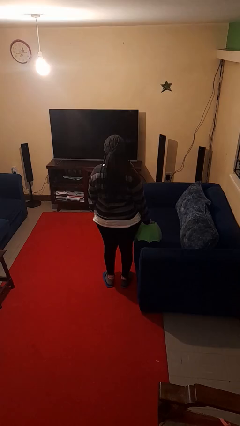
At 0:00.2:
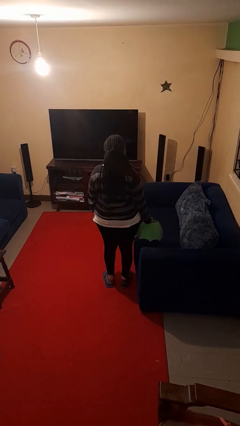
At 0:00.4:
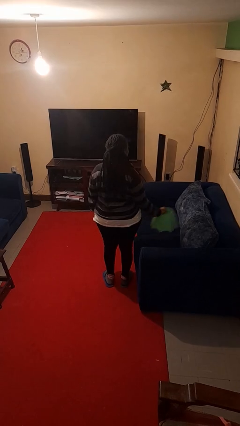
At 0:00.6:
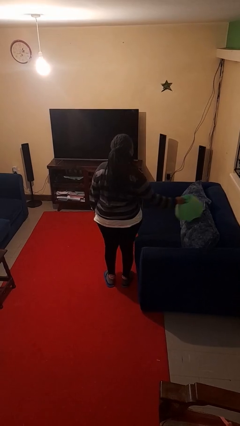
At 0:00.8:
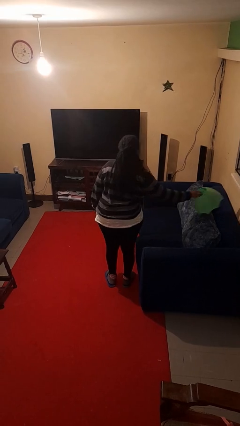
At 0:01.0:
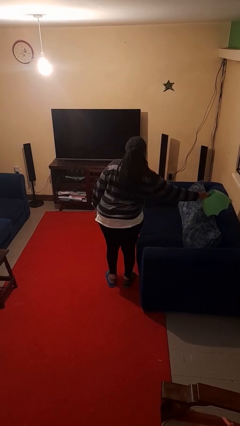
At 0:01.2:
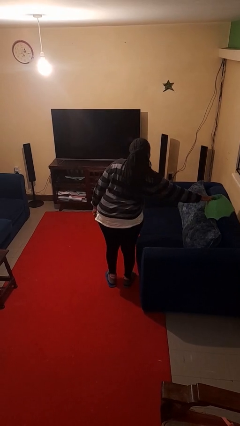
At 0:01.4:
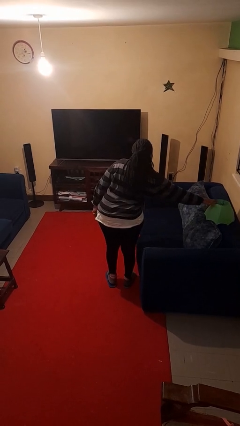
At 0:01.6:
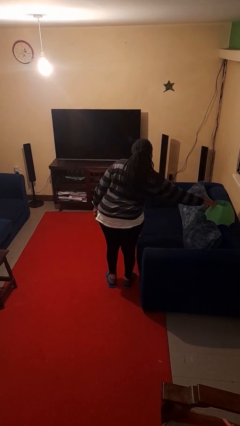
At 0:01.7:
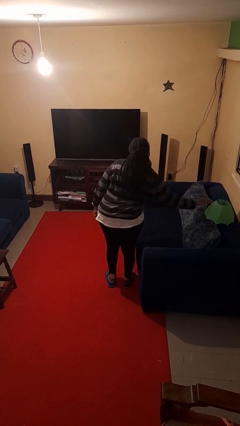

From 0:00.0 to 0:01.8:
person puts down object on couch

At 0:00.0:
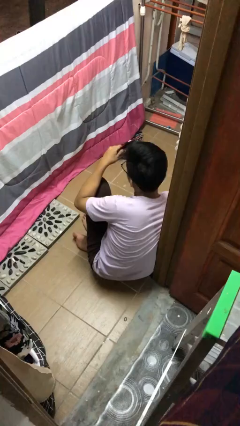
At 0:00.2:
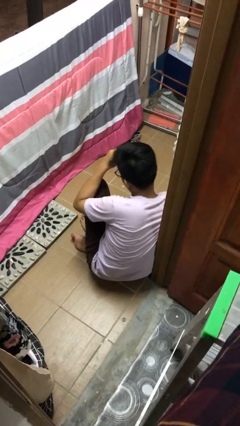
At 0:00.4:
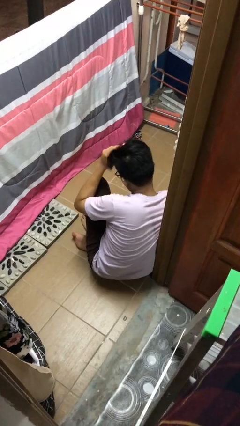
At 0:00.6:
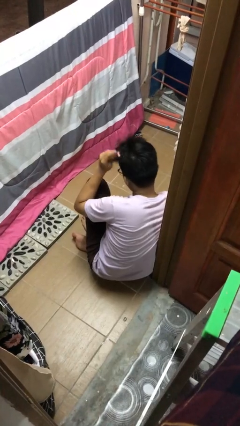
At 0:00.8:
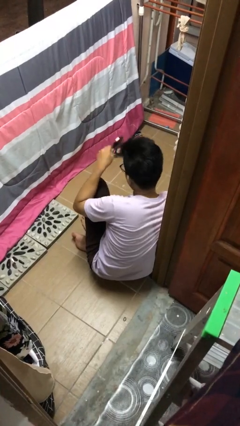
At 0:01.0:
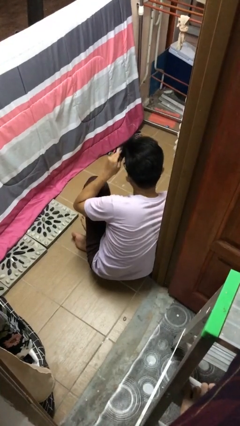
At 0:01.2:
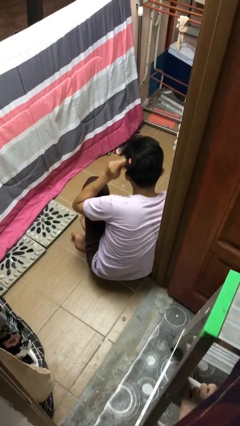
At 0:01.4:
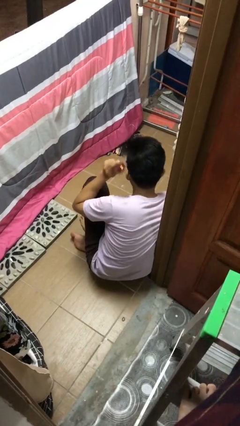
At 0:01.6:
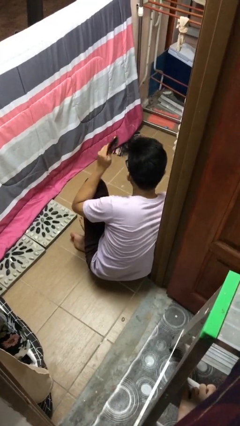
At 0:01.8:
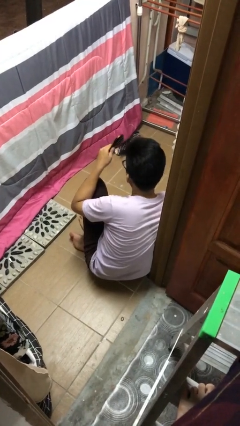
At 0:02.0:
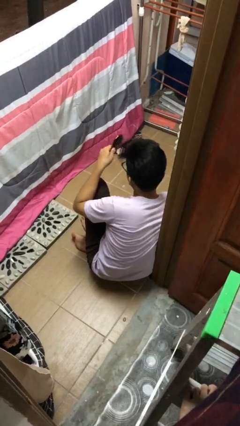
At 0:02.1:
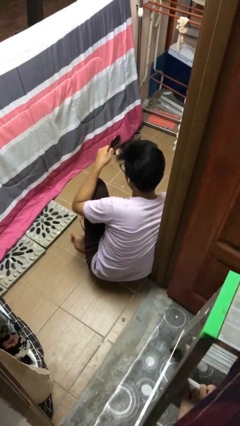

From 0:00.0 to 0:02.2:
person brushes hair

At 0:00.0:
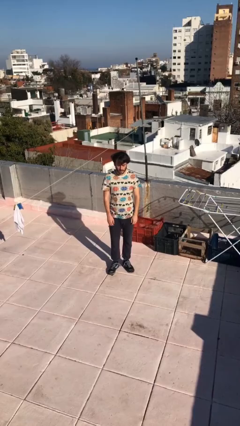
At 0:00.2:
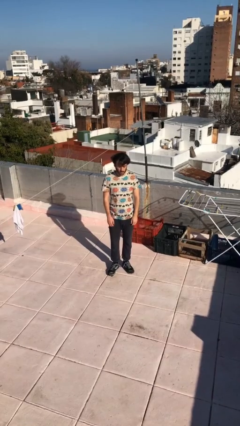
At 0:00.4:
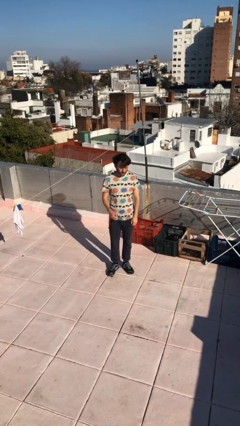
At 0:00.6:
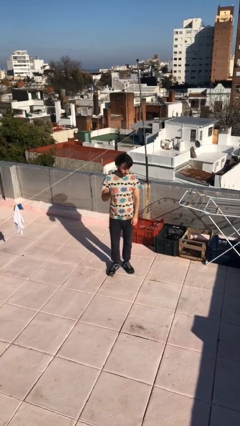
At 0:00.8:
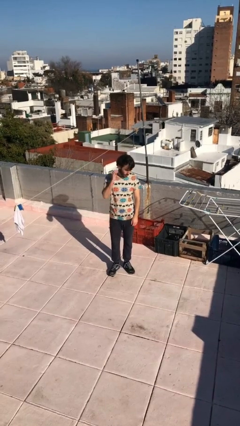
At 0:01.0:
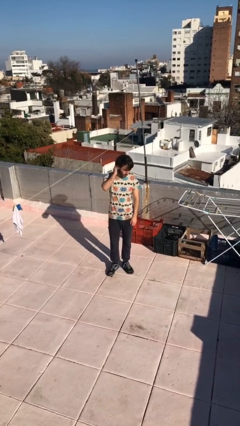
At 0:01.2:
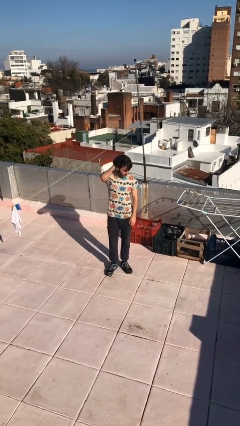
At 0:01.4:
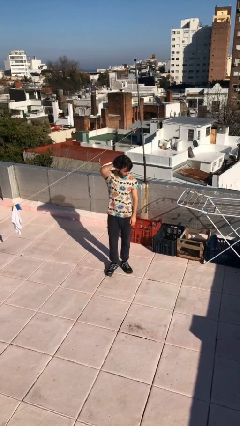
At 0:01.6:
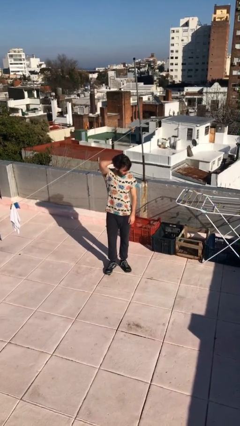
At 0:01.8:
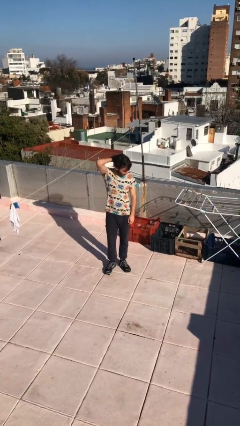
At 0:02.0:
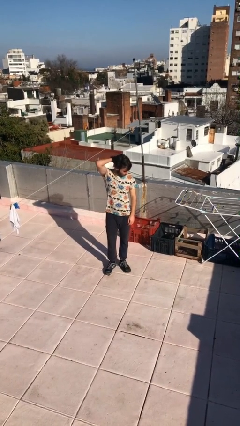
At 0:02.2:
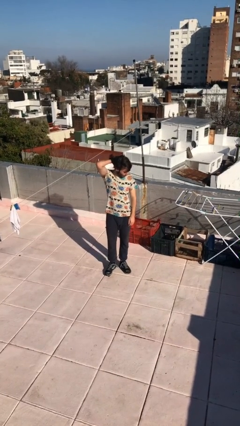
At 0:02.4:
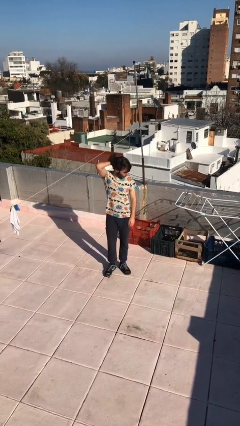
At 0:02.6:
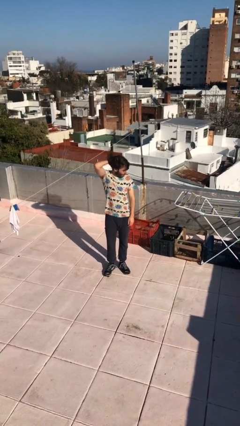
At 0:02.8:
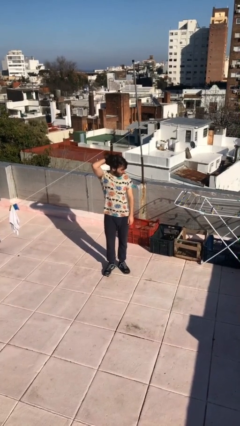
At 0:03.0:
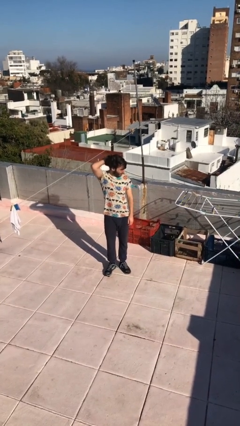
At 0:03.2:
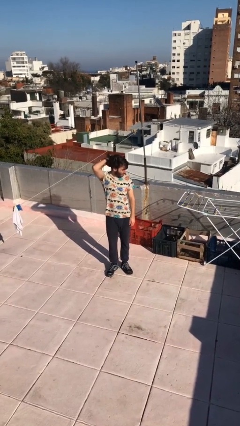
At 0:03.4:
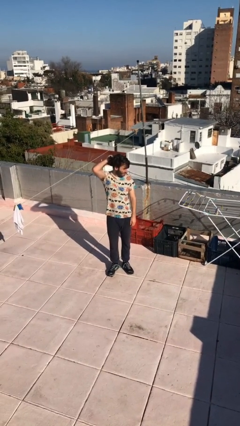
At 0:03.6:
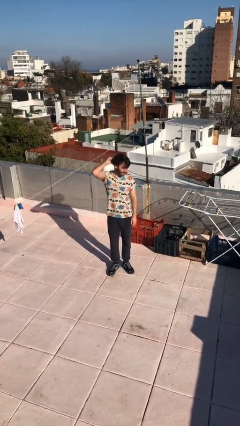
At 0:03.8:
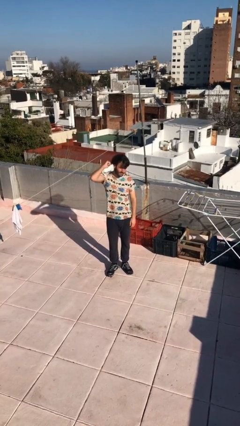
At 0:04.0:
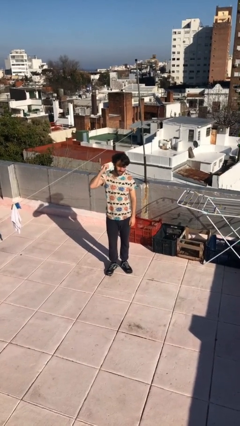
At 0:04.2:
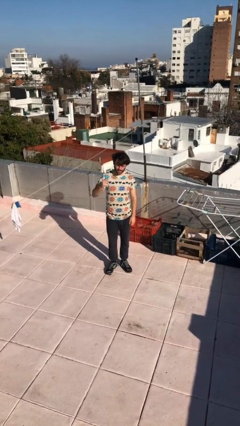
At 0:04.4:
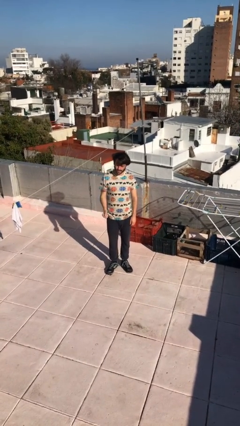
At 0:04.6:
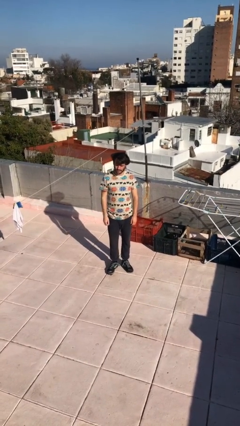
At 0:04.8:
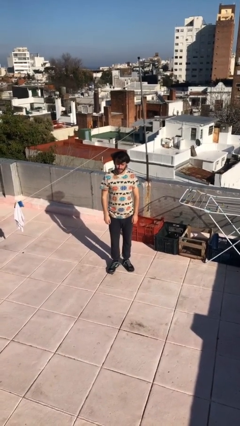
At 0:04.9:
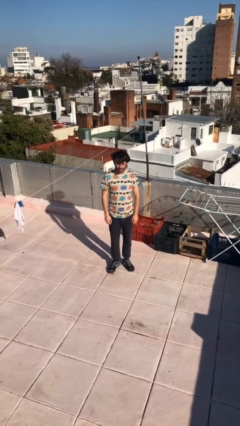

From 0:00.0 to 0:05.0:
person scratches face

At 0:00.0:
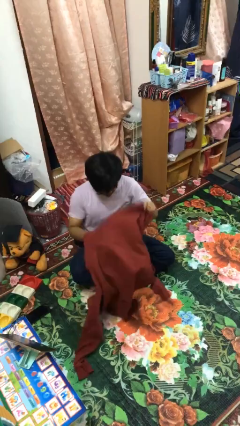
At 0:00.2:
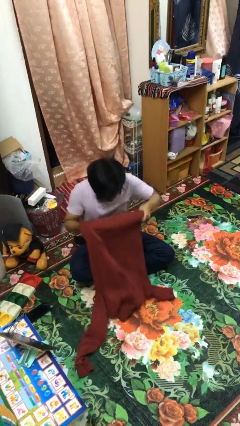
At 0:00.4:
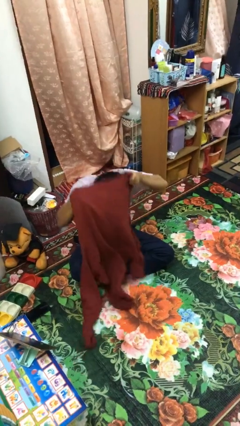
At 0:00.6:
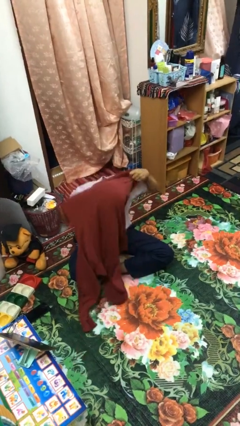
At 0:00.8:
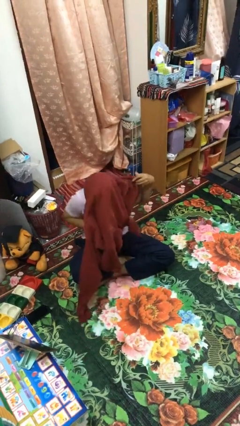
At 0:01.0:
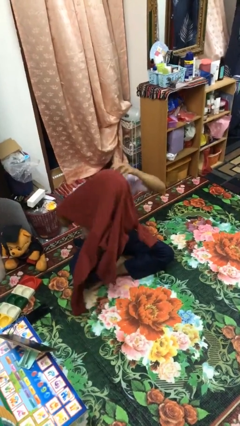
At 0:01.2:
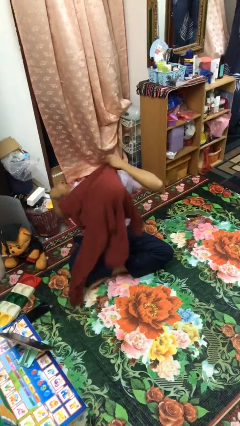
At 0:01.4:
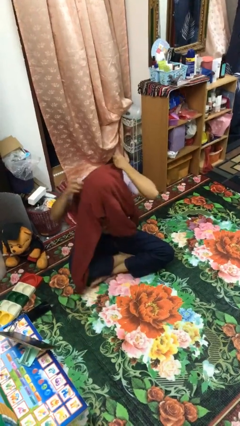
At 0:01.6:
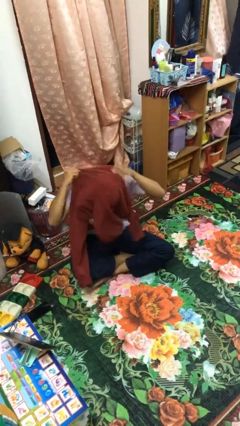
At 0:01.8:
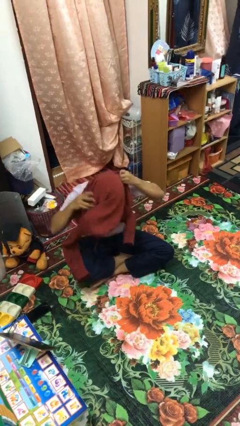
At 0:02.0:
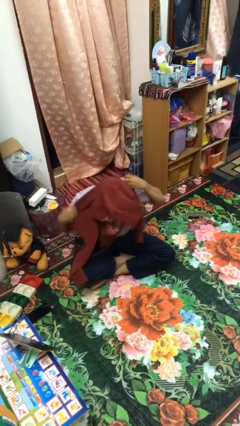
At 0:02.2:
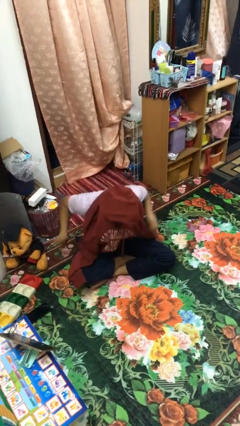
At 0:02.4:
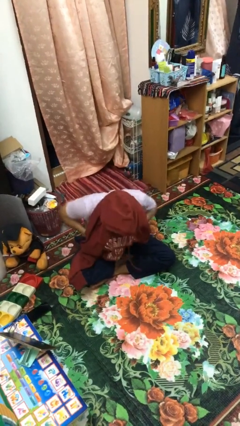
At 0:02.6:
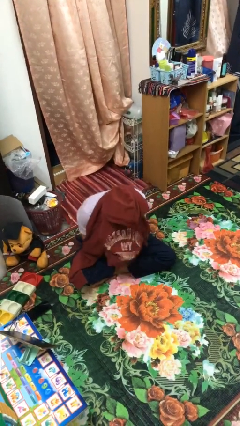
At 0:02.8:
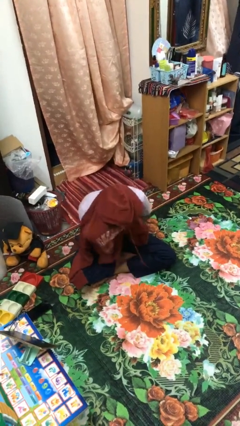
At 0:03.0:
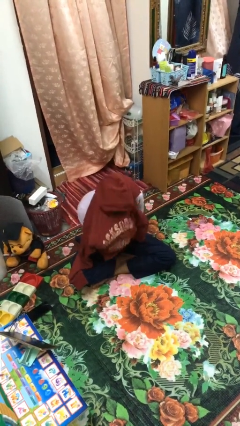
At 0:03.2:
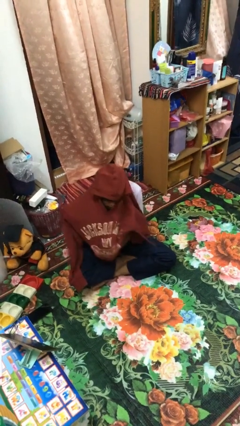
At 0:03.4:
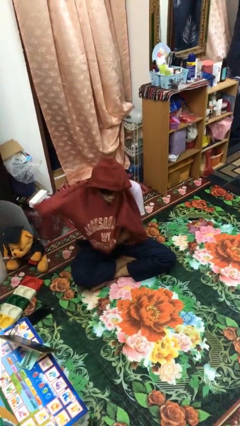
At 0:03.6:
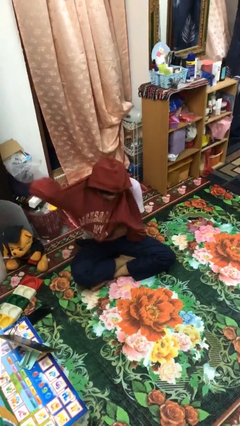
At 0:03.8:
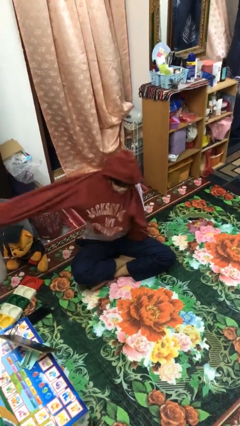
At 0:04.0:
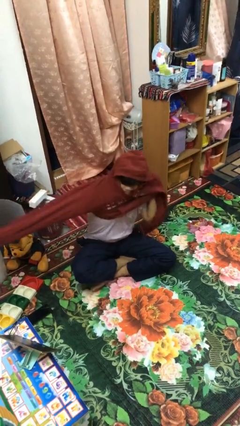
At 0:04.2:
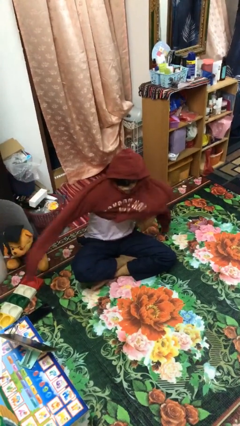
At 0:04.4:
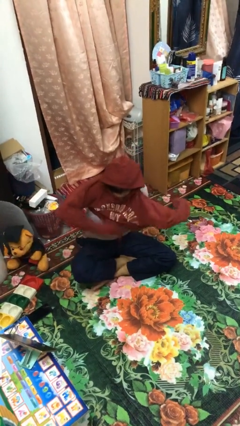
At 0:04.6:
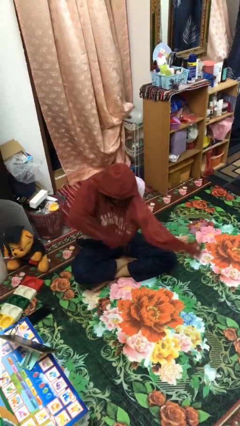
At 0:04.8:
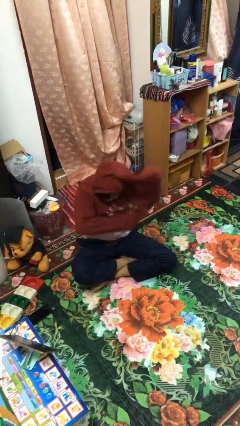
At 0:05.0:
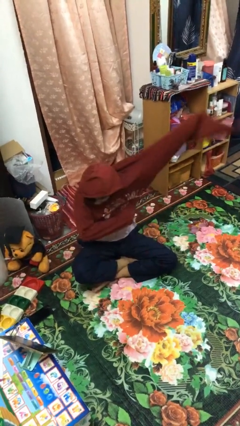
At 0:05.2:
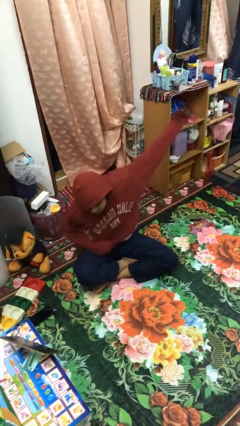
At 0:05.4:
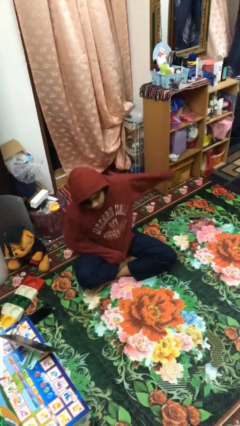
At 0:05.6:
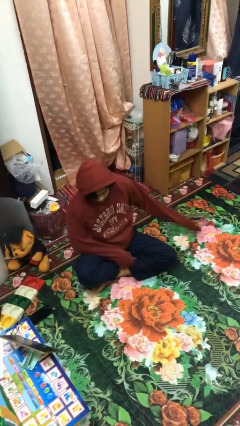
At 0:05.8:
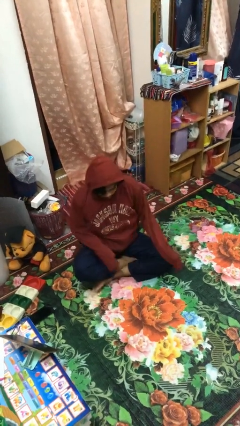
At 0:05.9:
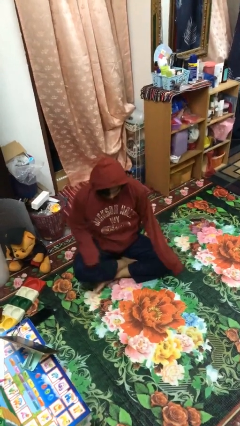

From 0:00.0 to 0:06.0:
person puts on hoodie

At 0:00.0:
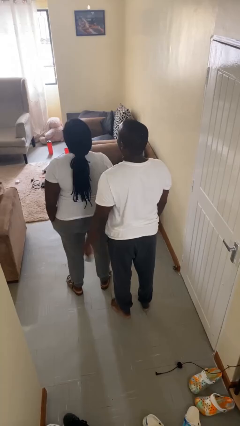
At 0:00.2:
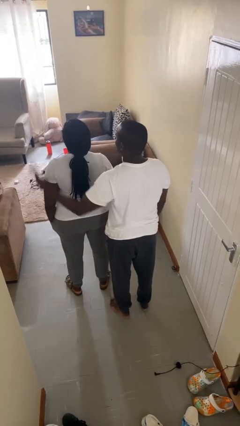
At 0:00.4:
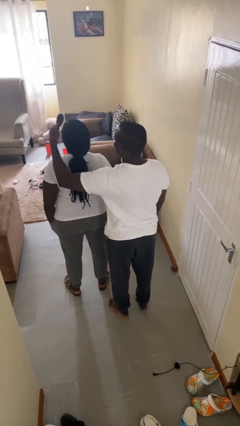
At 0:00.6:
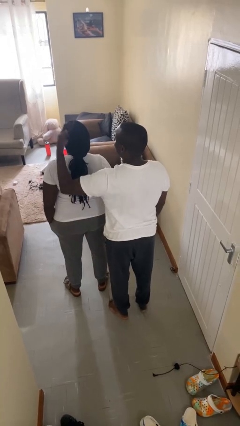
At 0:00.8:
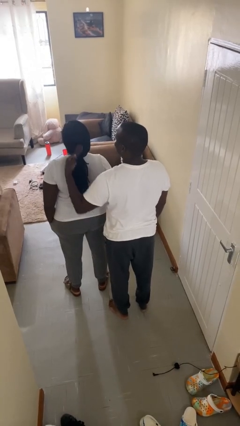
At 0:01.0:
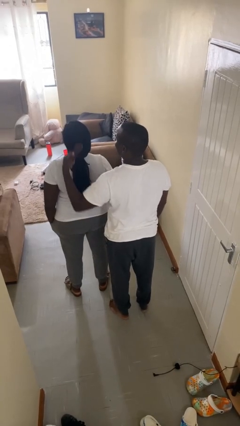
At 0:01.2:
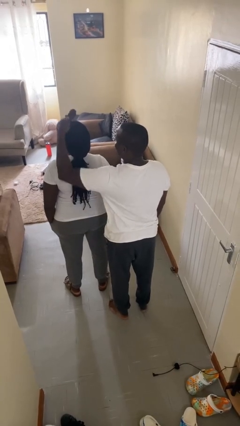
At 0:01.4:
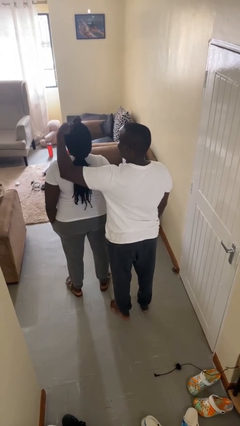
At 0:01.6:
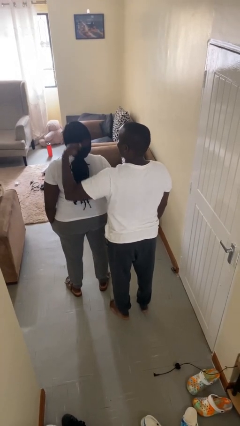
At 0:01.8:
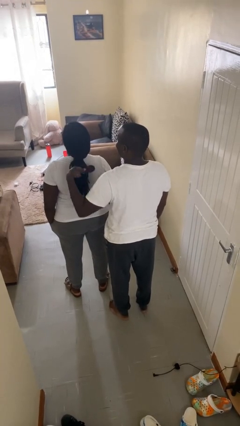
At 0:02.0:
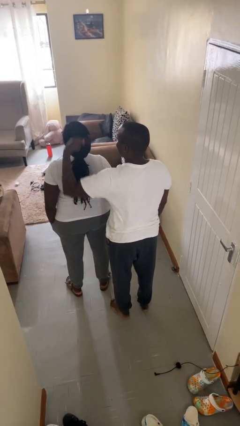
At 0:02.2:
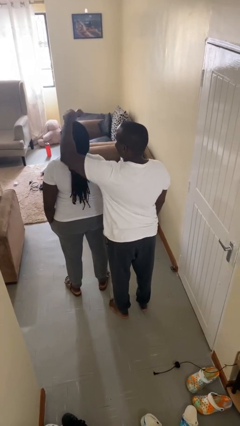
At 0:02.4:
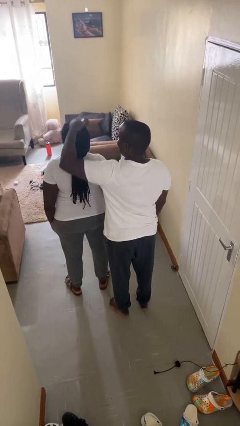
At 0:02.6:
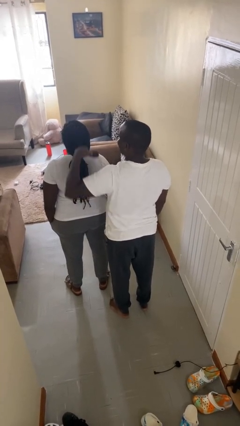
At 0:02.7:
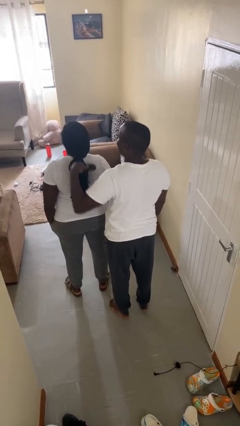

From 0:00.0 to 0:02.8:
person brushes hair of person
